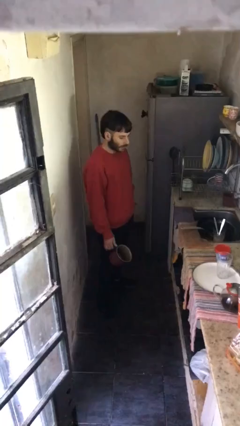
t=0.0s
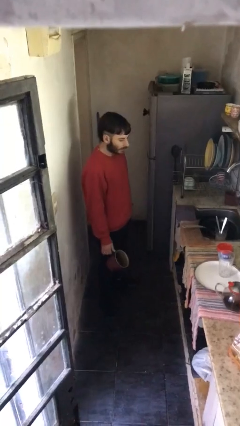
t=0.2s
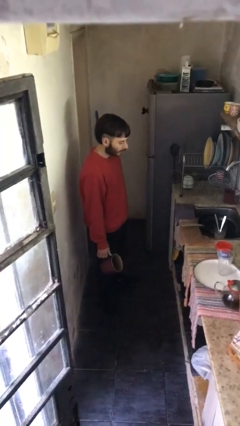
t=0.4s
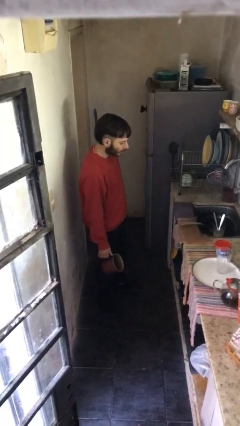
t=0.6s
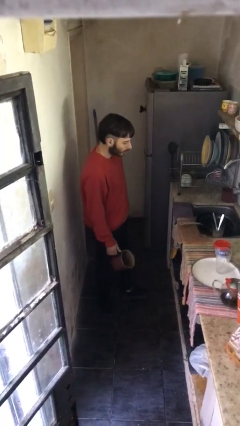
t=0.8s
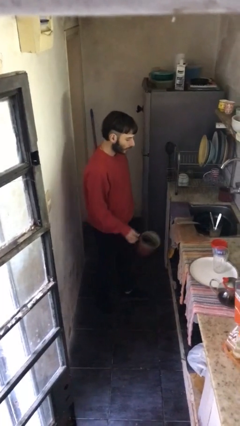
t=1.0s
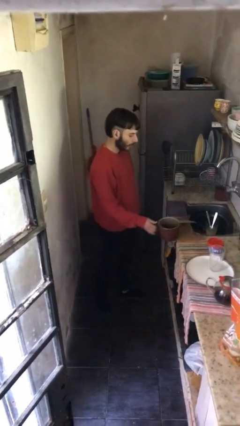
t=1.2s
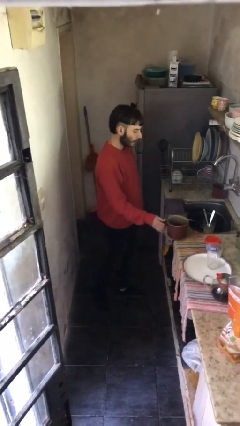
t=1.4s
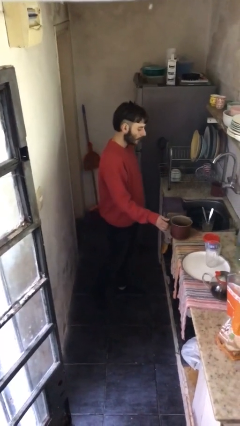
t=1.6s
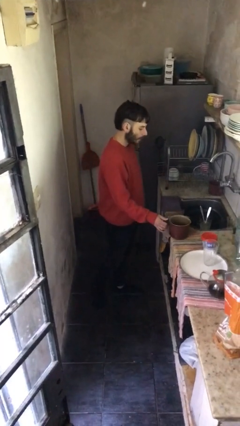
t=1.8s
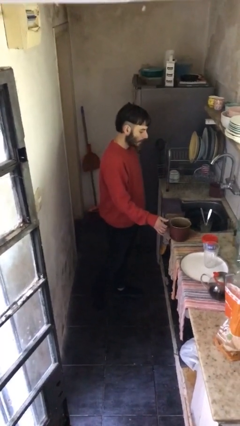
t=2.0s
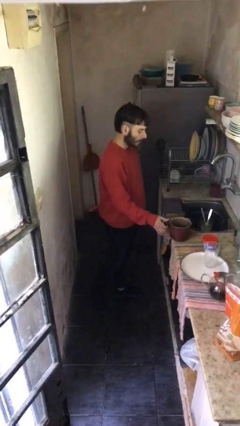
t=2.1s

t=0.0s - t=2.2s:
person puts down object on countertop

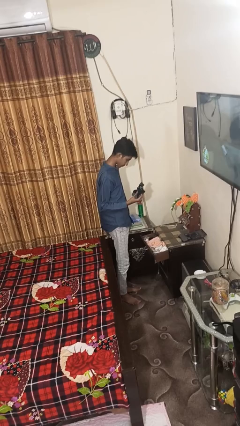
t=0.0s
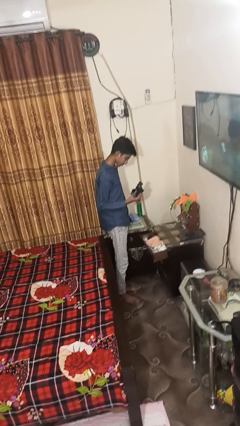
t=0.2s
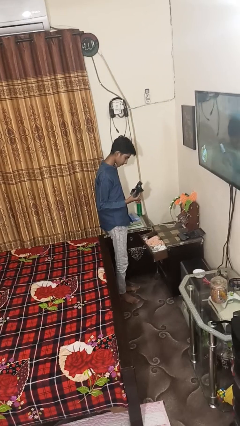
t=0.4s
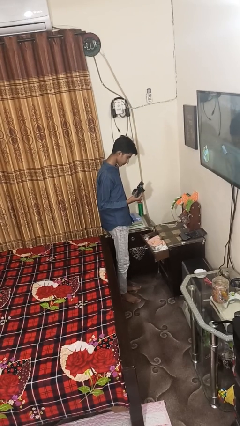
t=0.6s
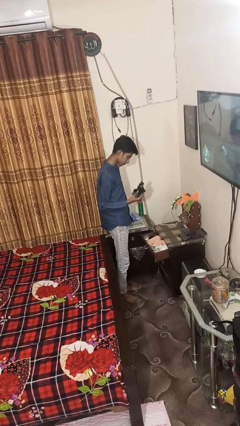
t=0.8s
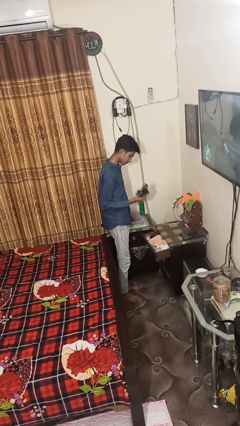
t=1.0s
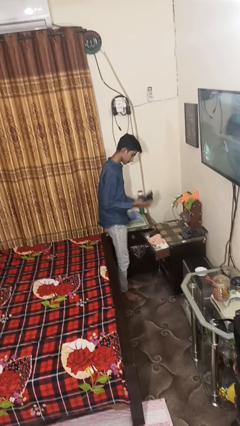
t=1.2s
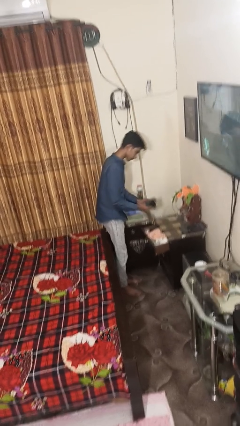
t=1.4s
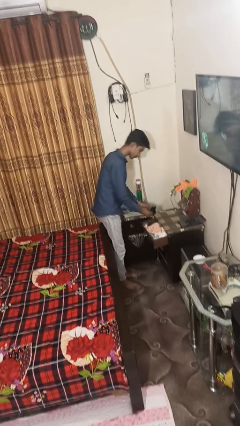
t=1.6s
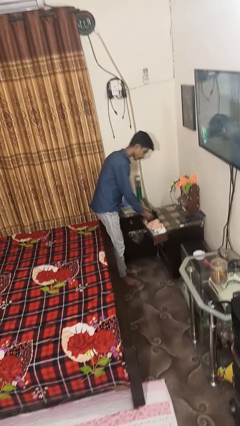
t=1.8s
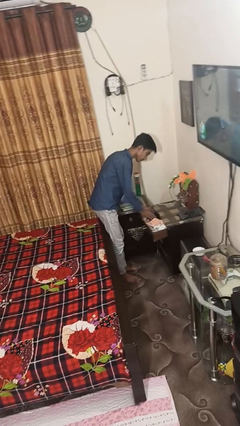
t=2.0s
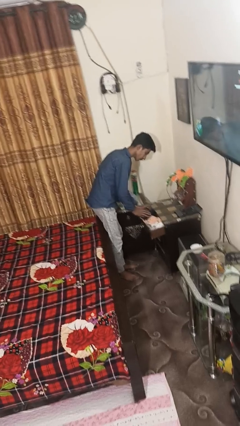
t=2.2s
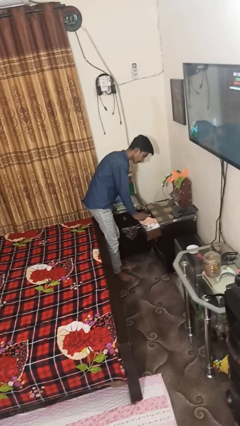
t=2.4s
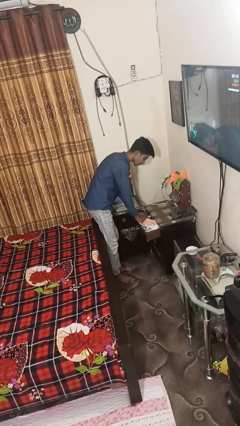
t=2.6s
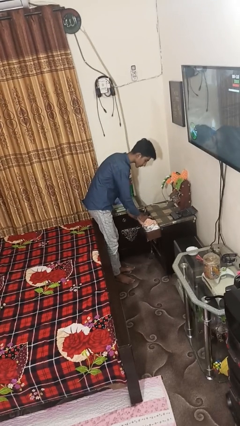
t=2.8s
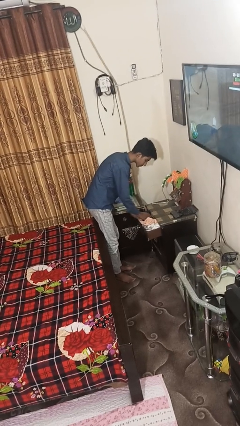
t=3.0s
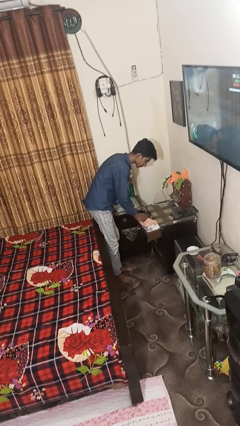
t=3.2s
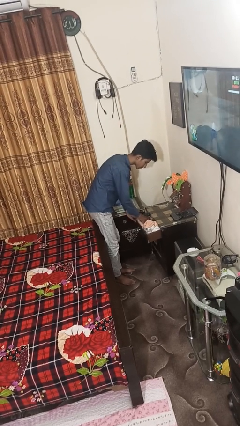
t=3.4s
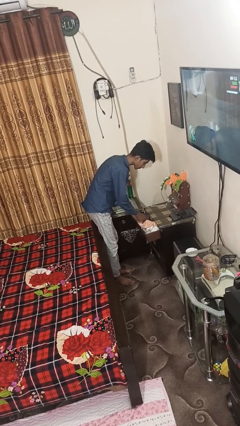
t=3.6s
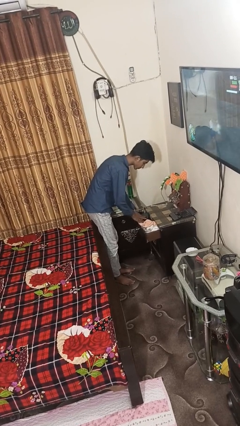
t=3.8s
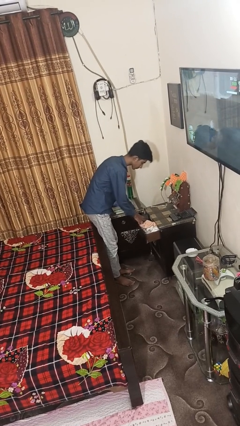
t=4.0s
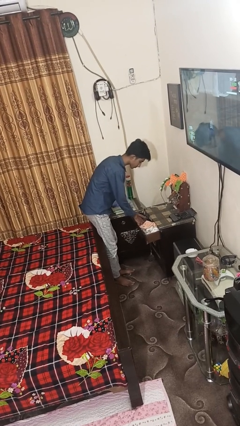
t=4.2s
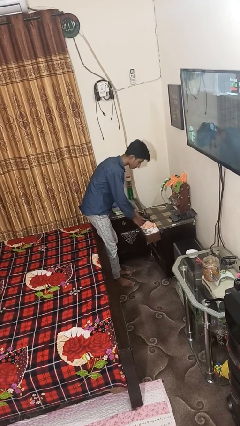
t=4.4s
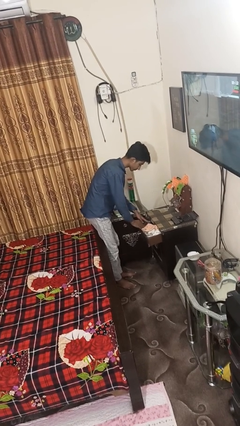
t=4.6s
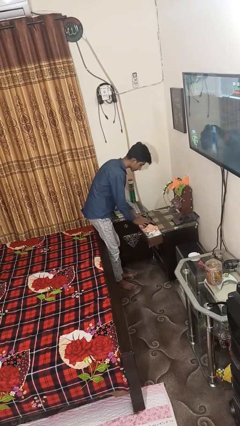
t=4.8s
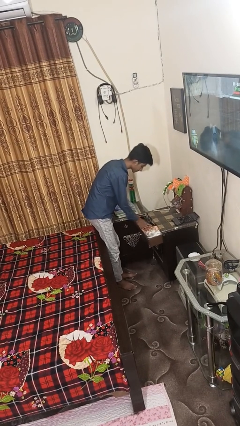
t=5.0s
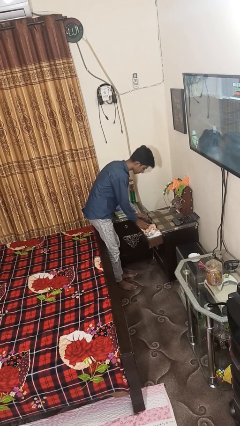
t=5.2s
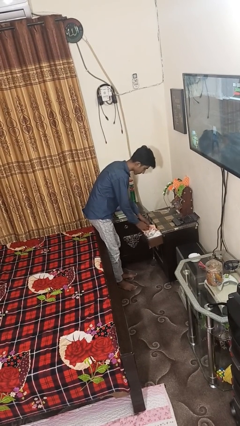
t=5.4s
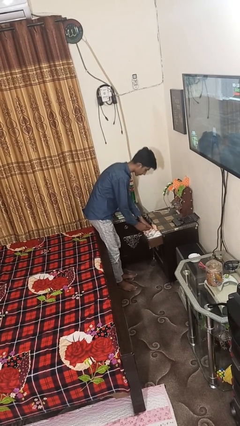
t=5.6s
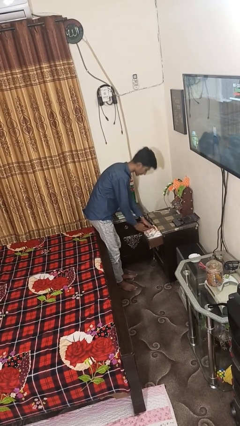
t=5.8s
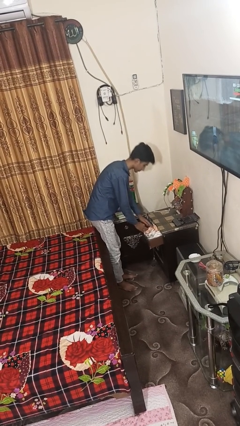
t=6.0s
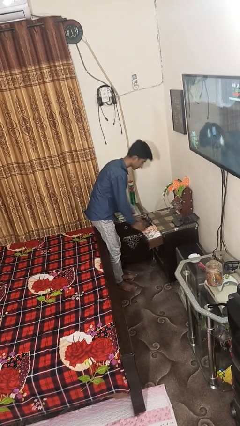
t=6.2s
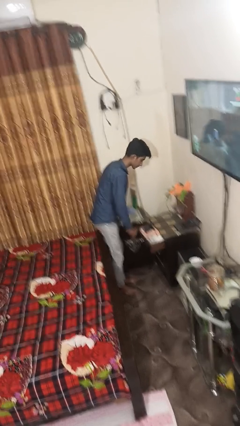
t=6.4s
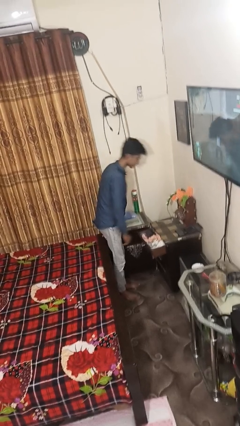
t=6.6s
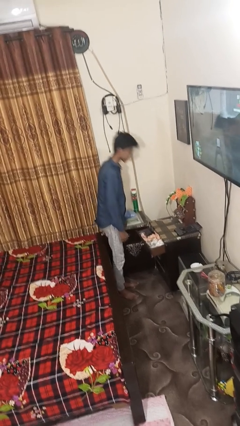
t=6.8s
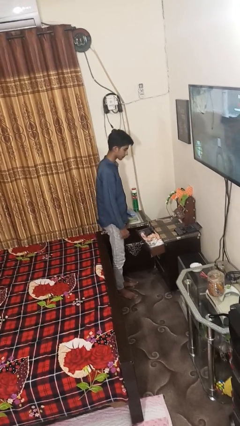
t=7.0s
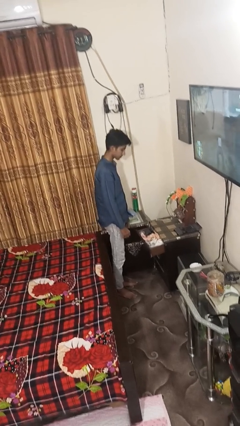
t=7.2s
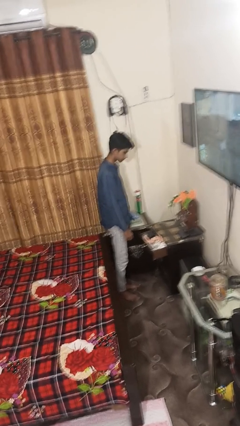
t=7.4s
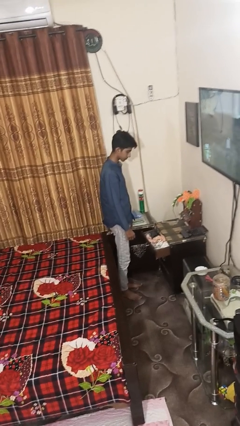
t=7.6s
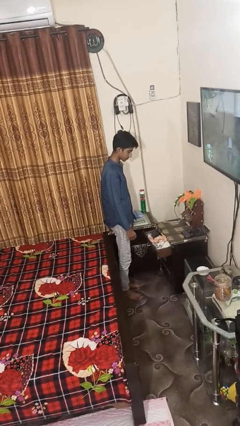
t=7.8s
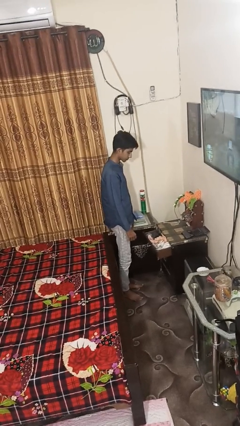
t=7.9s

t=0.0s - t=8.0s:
person puts clothes into dresser

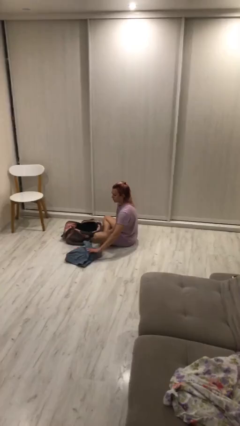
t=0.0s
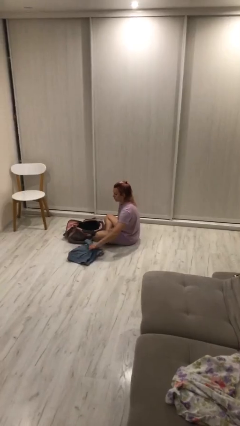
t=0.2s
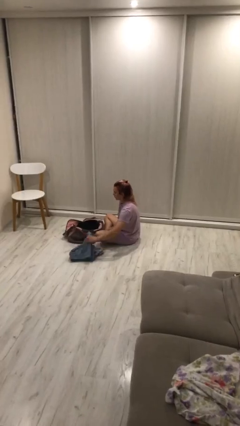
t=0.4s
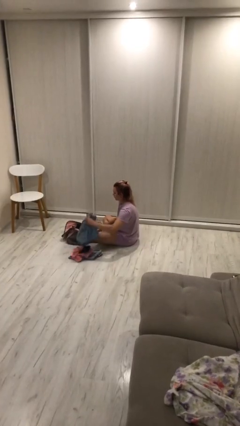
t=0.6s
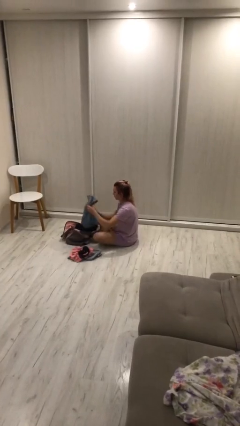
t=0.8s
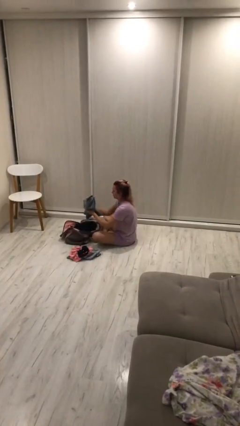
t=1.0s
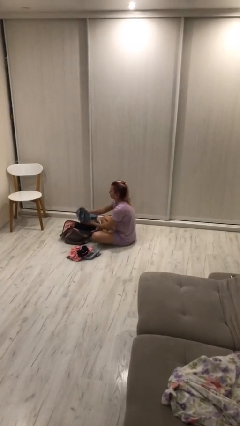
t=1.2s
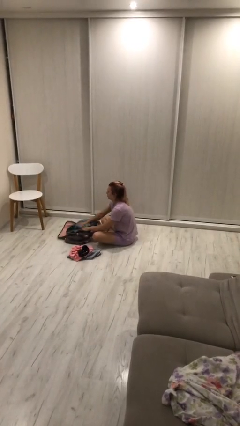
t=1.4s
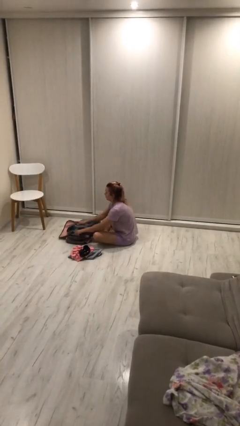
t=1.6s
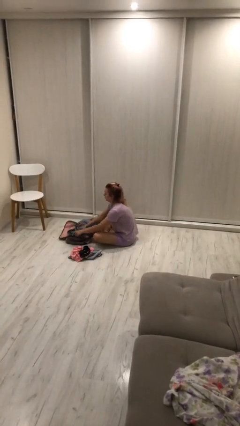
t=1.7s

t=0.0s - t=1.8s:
person loads clothes into suitcase

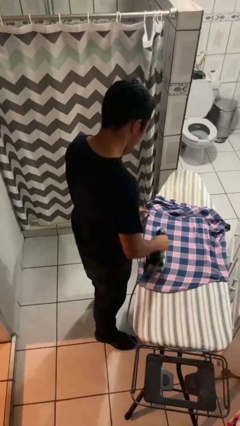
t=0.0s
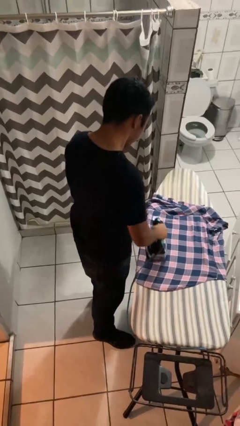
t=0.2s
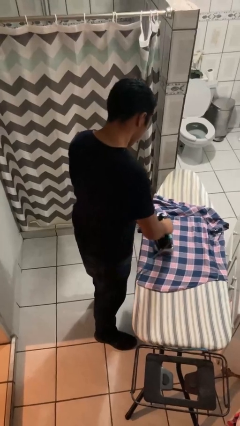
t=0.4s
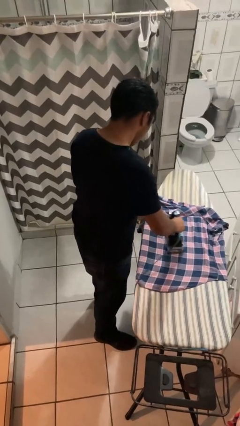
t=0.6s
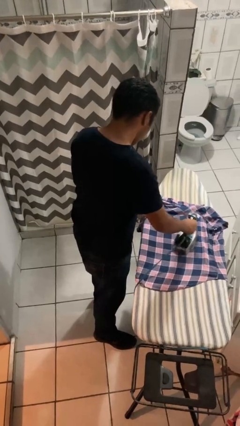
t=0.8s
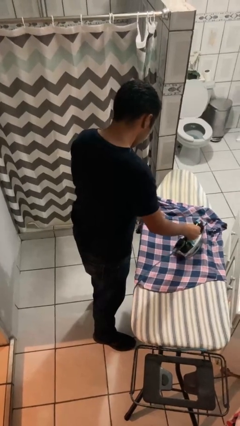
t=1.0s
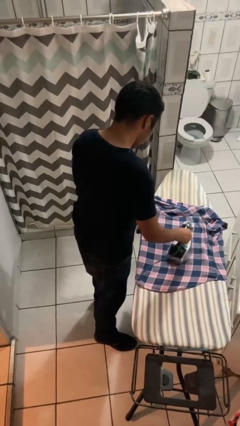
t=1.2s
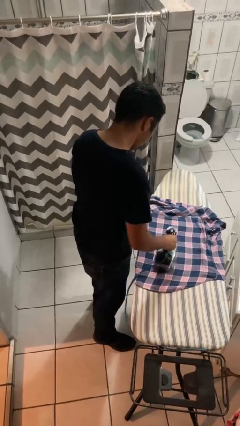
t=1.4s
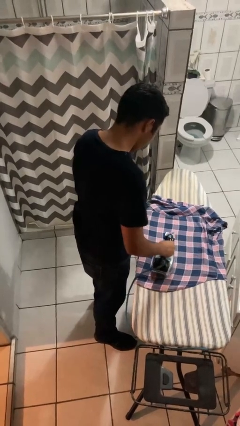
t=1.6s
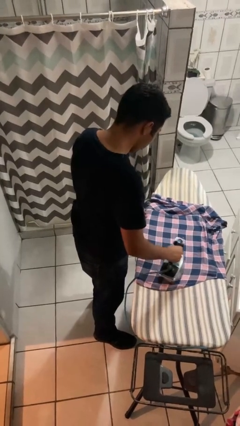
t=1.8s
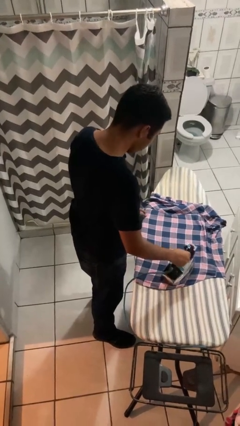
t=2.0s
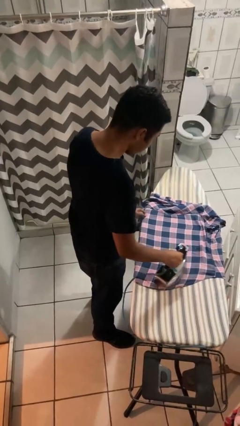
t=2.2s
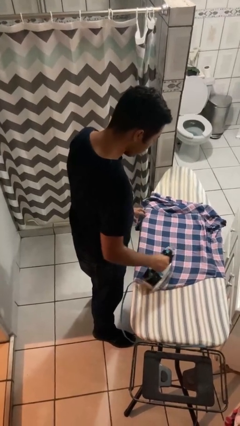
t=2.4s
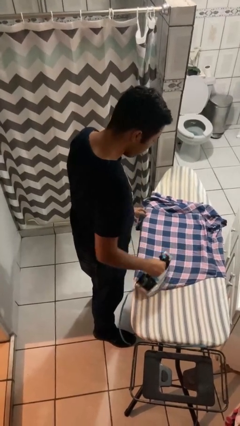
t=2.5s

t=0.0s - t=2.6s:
person irons clothes

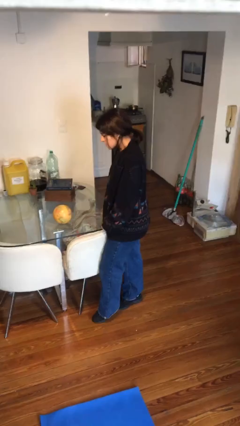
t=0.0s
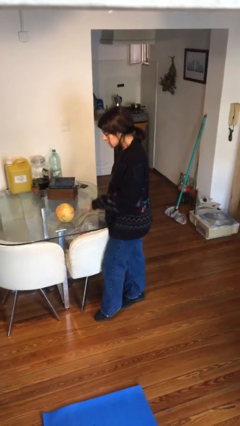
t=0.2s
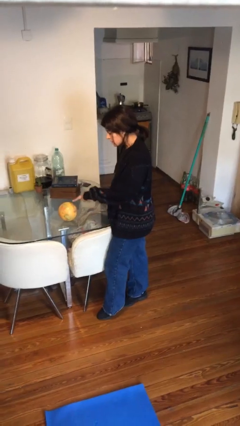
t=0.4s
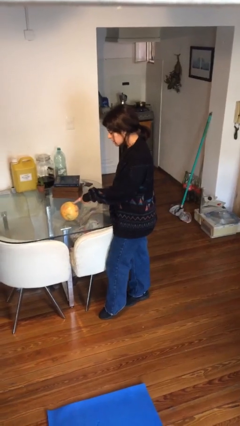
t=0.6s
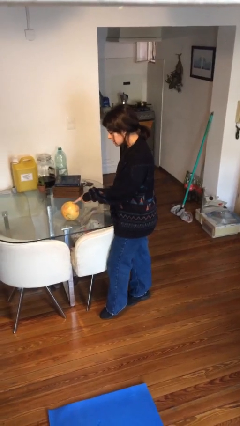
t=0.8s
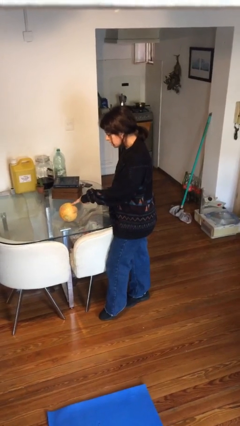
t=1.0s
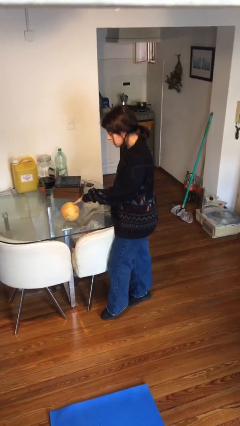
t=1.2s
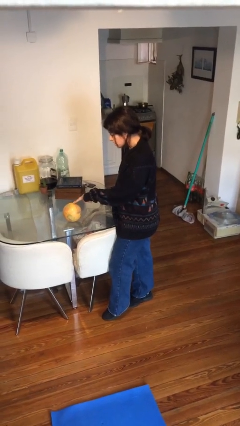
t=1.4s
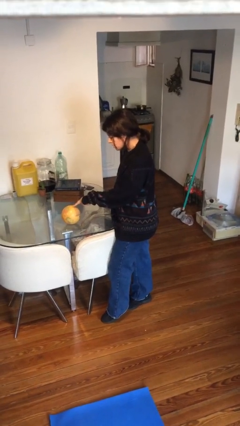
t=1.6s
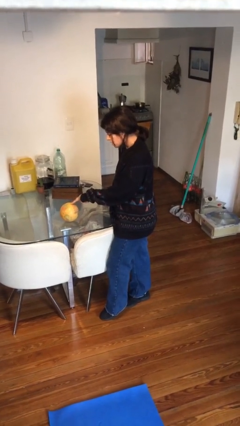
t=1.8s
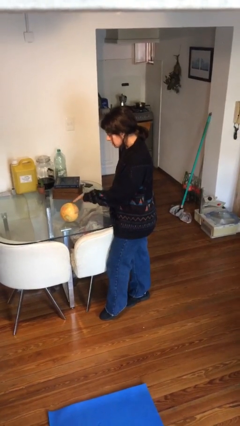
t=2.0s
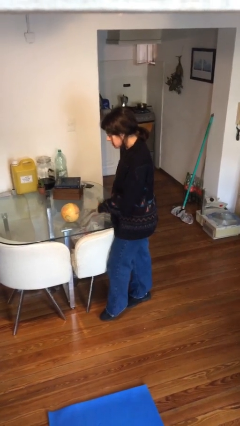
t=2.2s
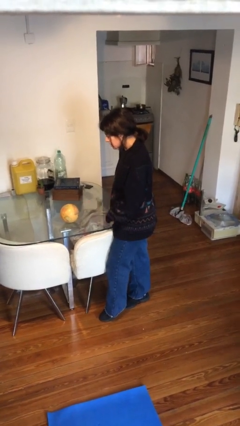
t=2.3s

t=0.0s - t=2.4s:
person taps object with finger

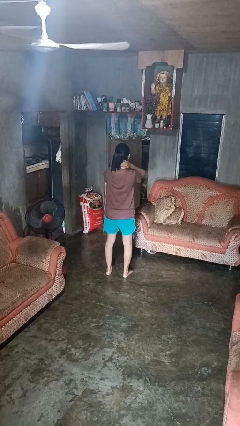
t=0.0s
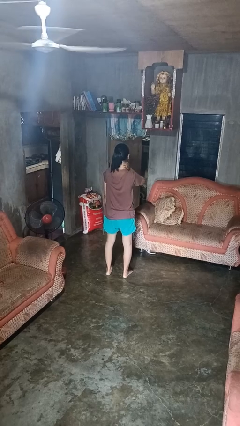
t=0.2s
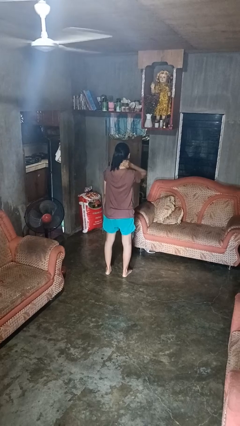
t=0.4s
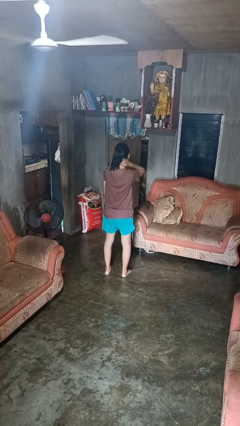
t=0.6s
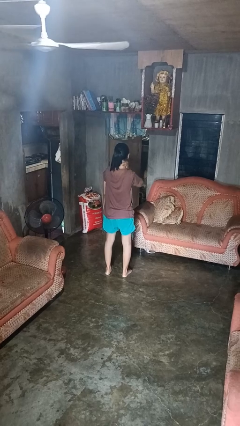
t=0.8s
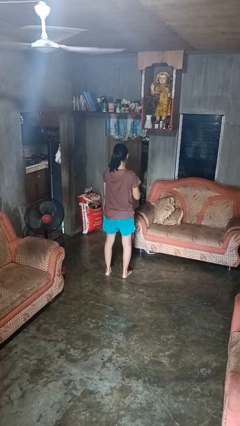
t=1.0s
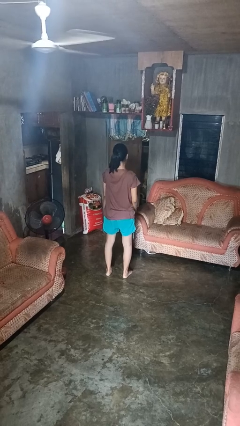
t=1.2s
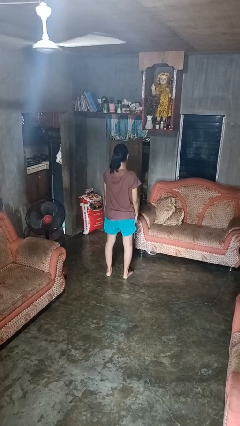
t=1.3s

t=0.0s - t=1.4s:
person rubs neck
